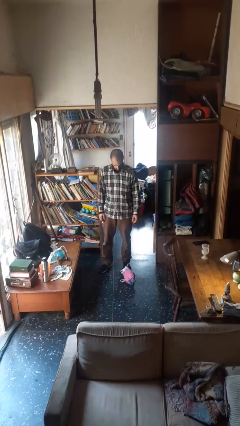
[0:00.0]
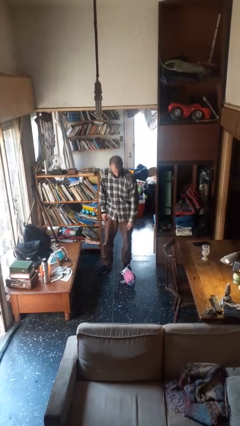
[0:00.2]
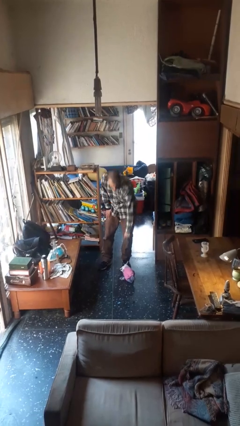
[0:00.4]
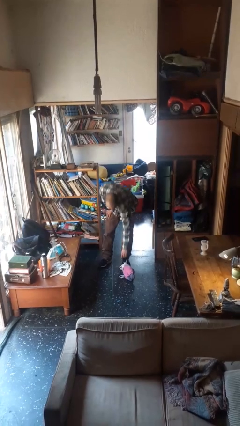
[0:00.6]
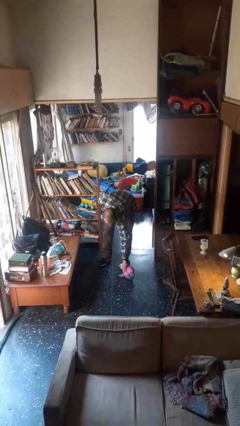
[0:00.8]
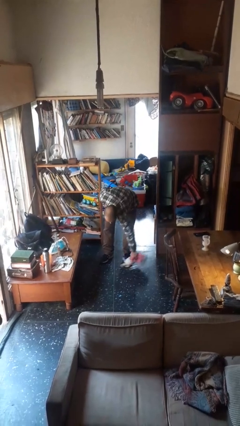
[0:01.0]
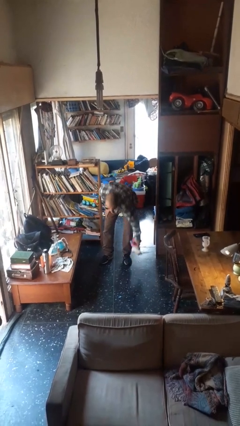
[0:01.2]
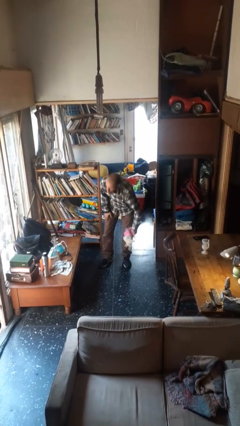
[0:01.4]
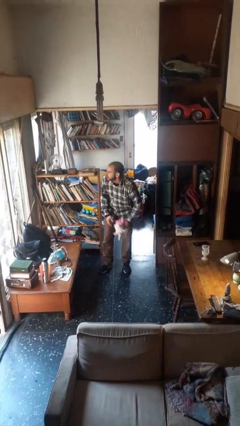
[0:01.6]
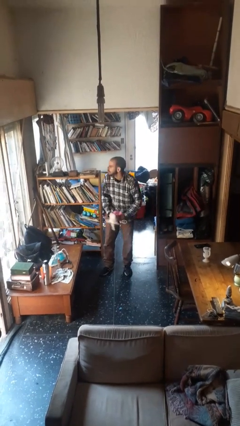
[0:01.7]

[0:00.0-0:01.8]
person picks up object from floor

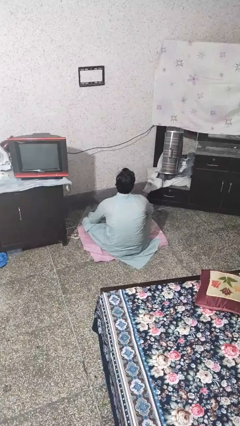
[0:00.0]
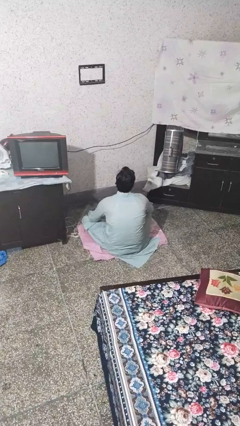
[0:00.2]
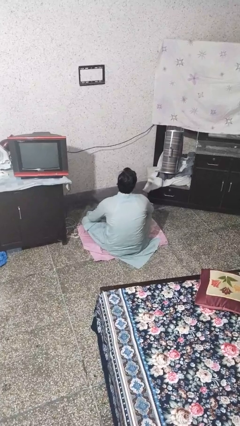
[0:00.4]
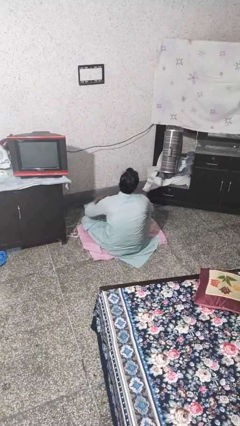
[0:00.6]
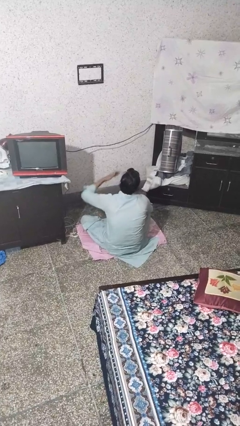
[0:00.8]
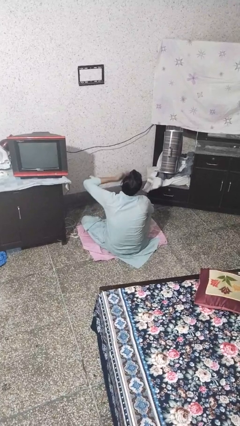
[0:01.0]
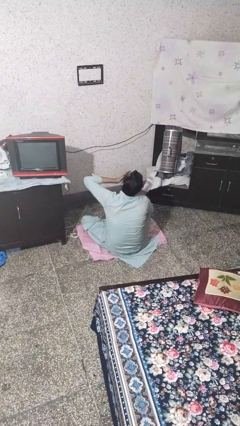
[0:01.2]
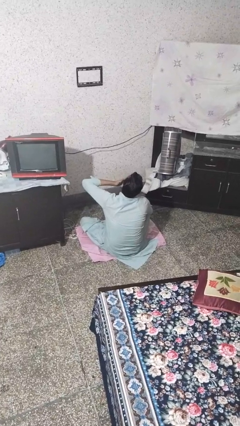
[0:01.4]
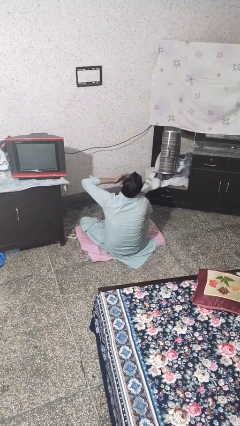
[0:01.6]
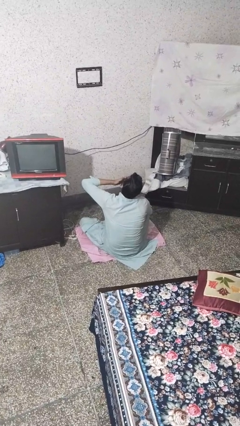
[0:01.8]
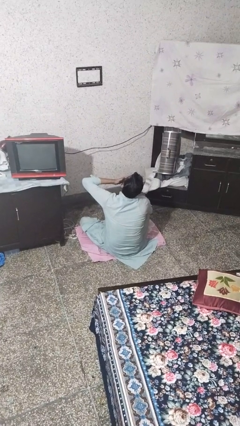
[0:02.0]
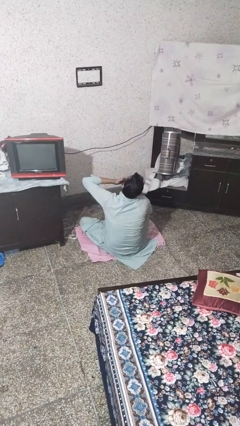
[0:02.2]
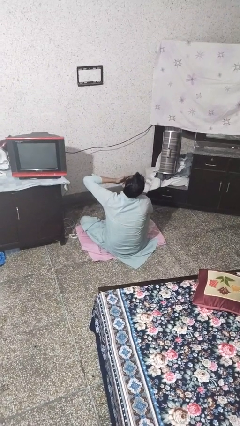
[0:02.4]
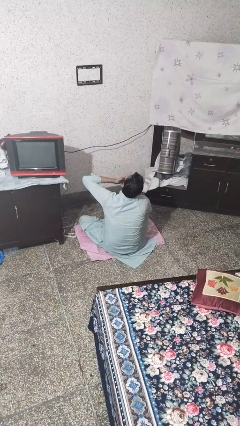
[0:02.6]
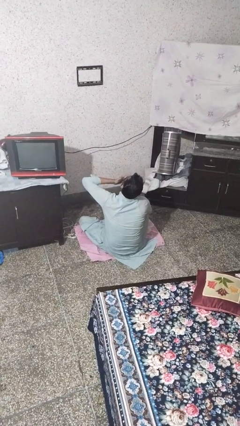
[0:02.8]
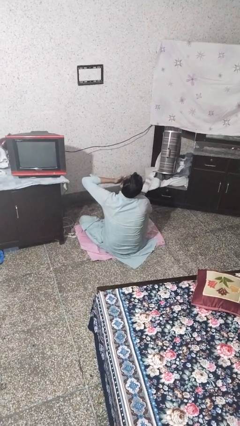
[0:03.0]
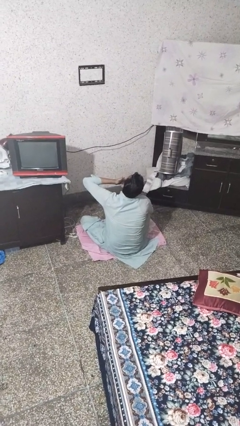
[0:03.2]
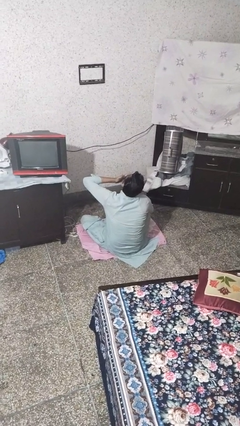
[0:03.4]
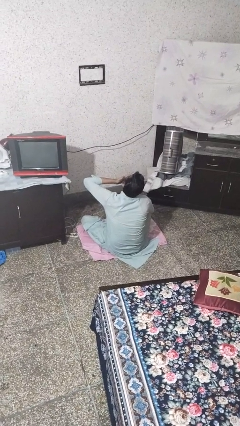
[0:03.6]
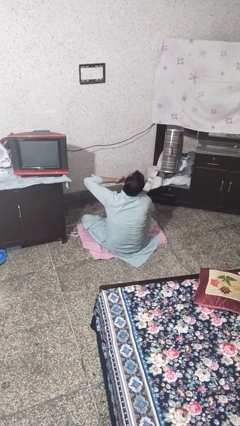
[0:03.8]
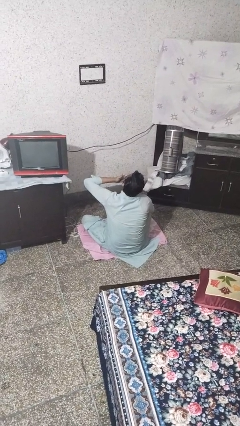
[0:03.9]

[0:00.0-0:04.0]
person yawns

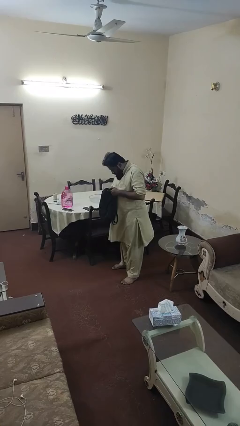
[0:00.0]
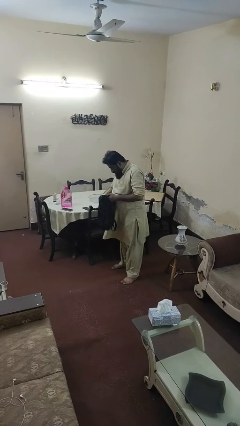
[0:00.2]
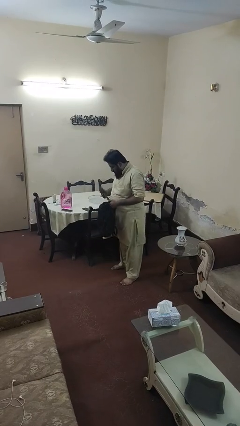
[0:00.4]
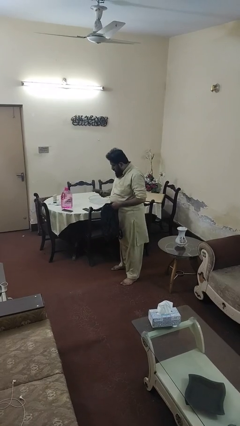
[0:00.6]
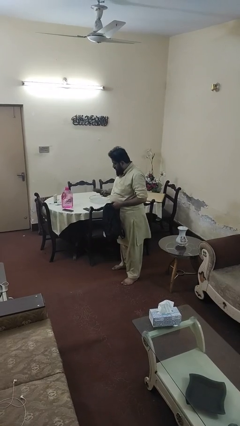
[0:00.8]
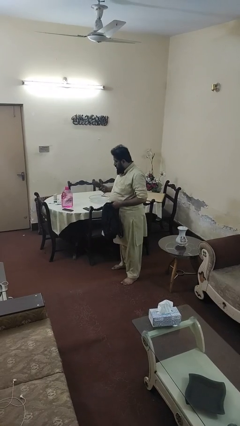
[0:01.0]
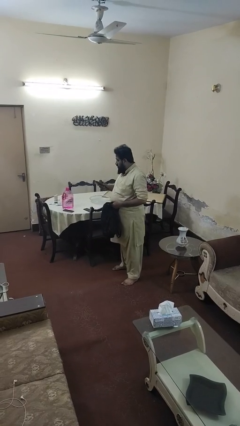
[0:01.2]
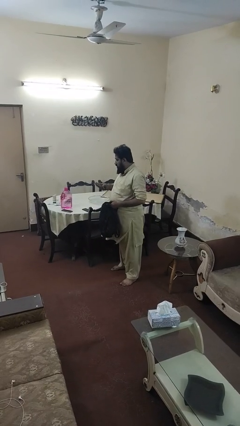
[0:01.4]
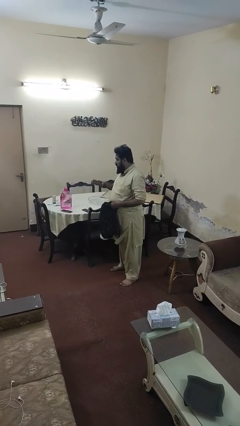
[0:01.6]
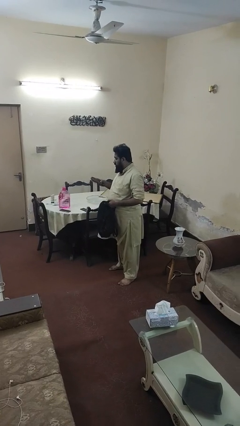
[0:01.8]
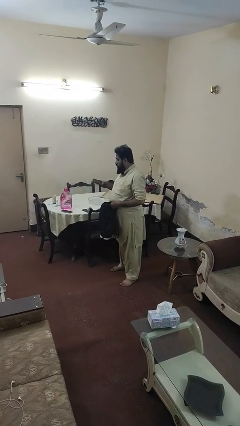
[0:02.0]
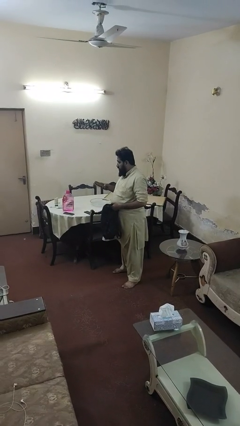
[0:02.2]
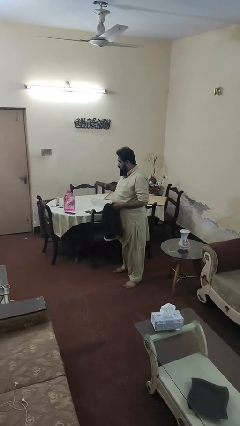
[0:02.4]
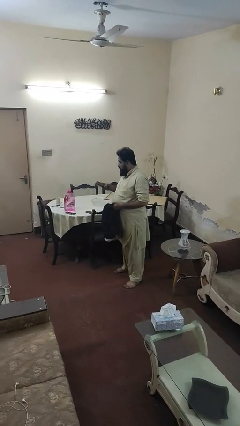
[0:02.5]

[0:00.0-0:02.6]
person takes object from backpack

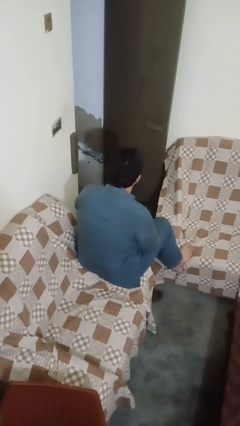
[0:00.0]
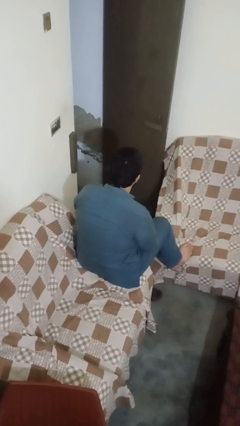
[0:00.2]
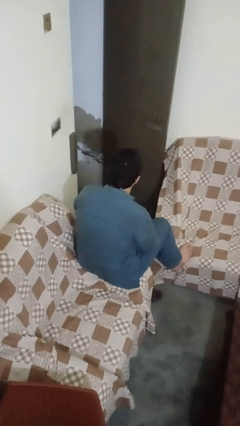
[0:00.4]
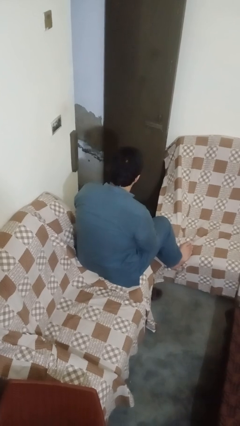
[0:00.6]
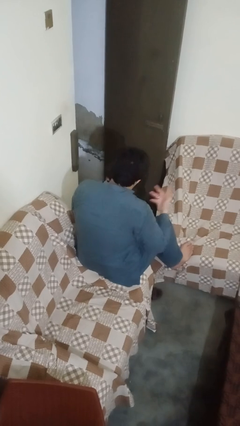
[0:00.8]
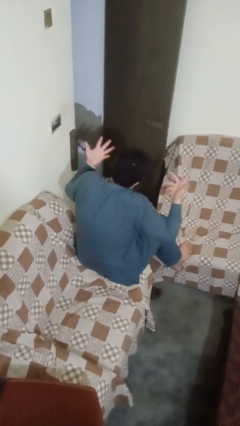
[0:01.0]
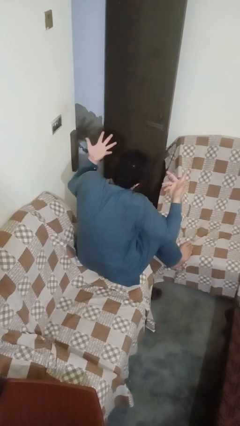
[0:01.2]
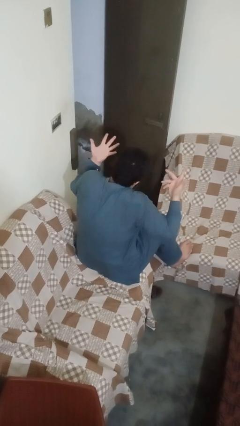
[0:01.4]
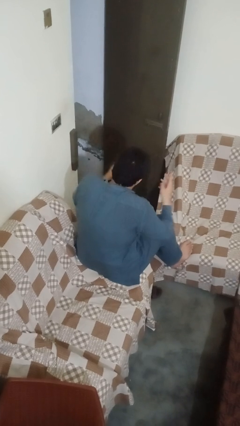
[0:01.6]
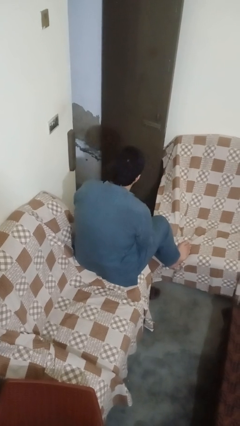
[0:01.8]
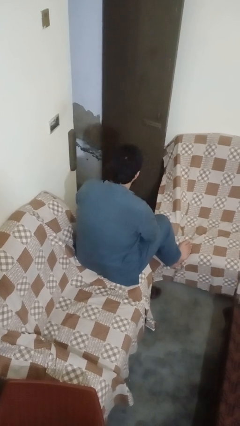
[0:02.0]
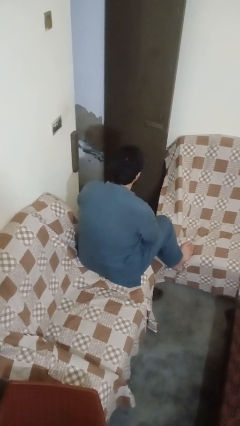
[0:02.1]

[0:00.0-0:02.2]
person shrugs

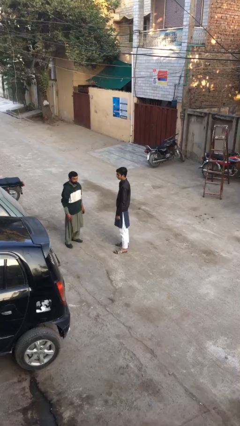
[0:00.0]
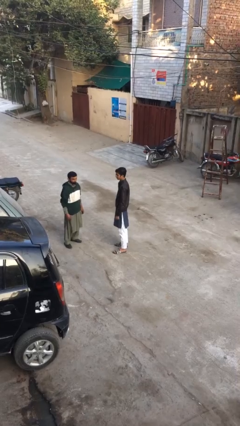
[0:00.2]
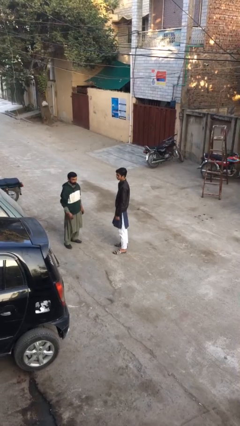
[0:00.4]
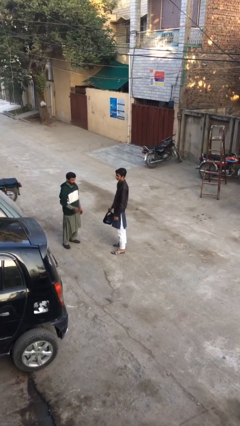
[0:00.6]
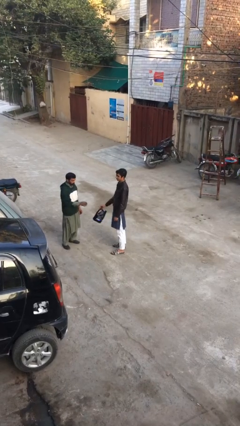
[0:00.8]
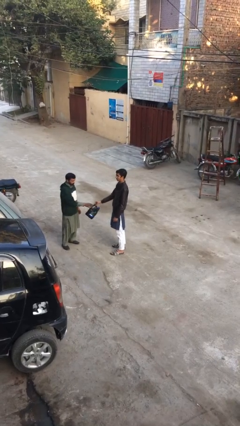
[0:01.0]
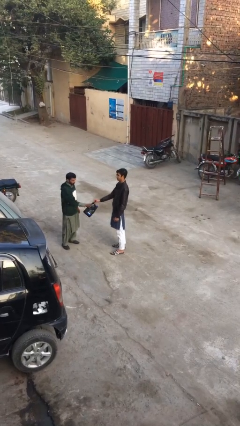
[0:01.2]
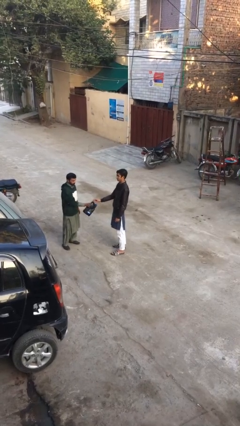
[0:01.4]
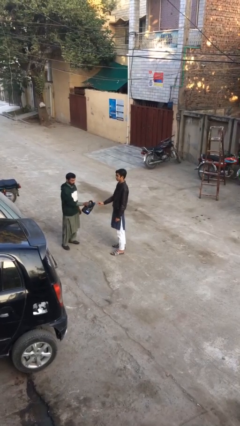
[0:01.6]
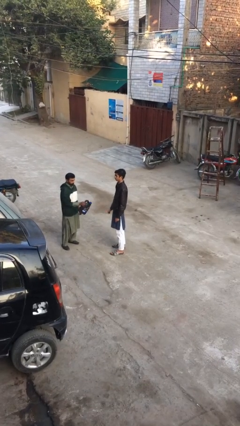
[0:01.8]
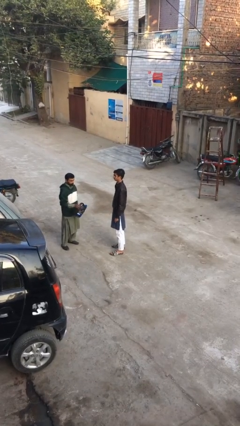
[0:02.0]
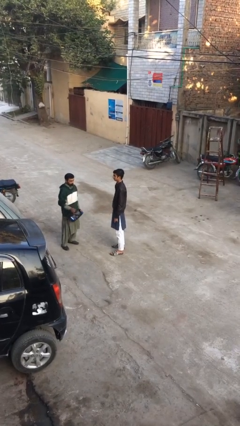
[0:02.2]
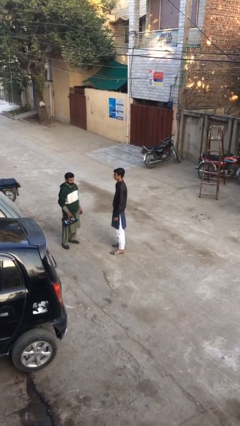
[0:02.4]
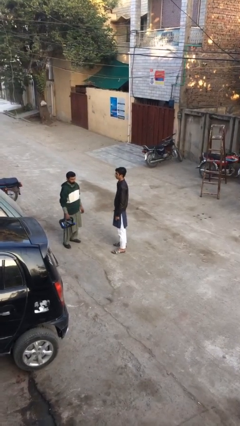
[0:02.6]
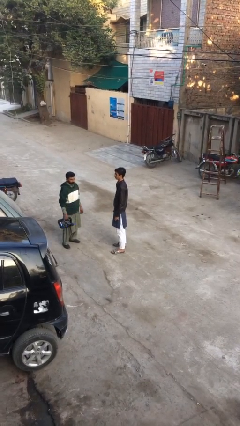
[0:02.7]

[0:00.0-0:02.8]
person transfers object to person

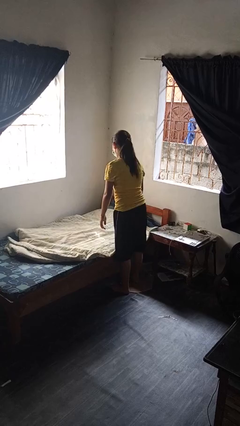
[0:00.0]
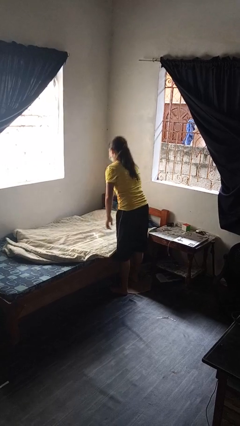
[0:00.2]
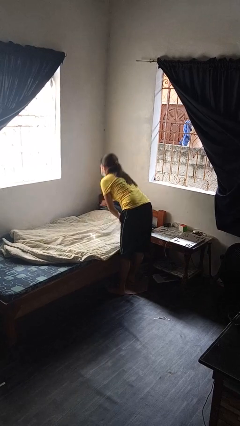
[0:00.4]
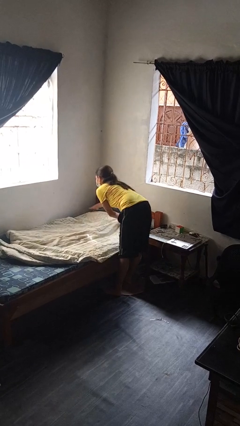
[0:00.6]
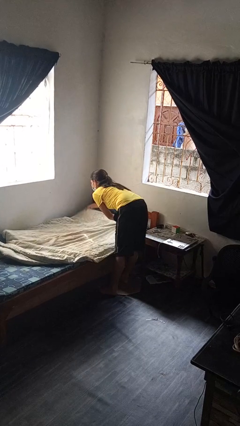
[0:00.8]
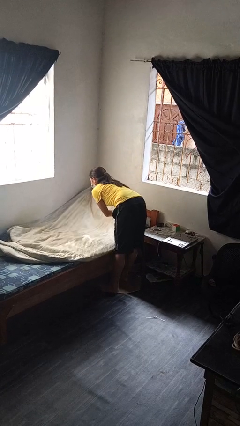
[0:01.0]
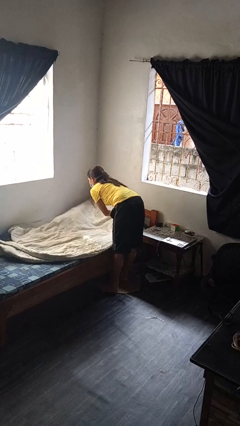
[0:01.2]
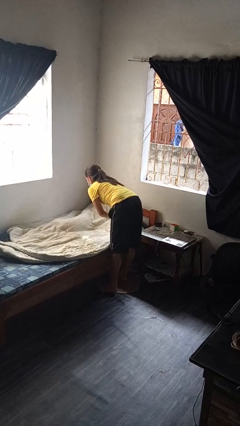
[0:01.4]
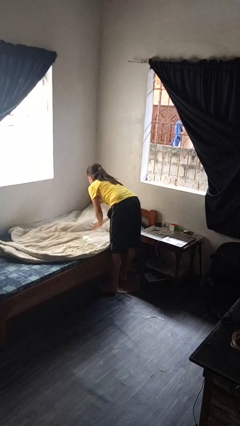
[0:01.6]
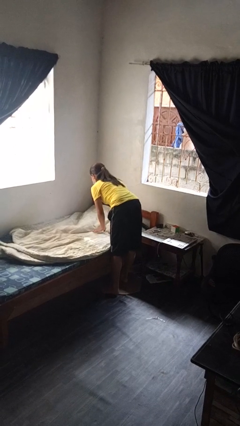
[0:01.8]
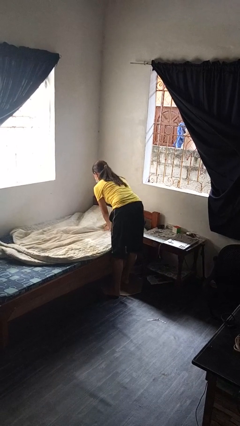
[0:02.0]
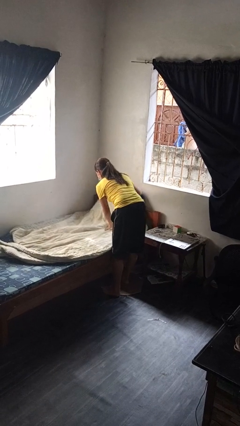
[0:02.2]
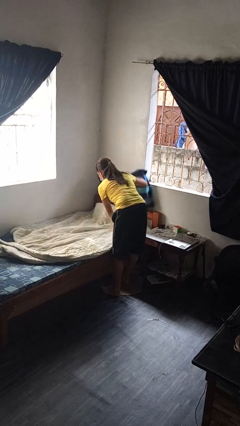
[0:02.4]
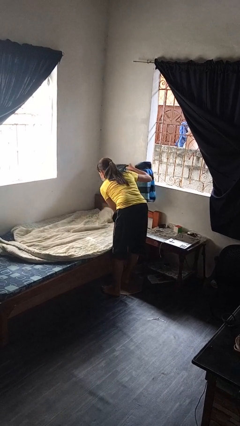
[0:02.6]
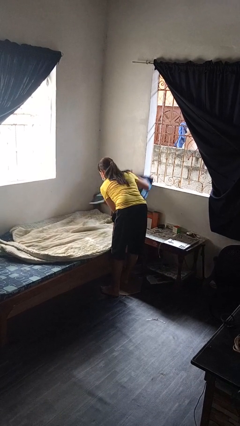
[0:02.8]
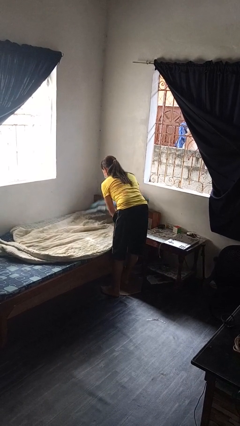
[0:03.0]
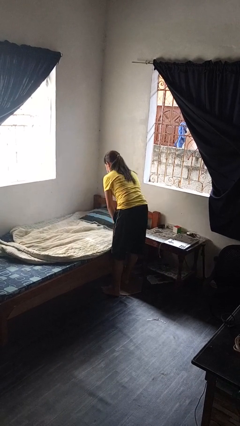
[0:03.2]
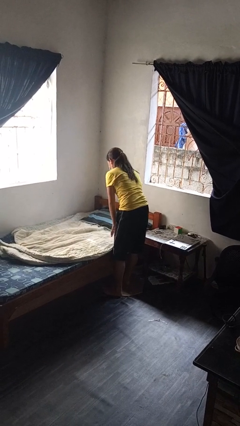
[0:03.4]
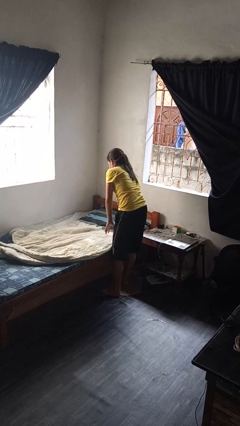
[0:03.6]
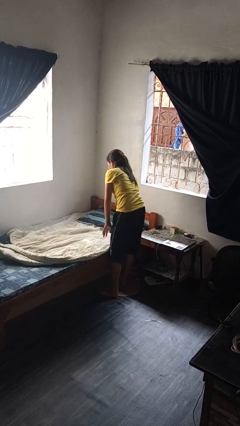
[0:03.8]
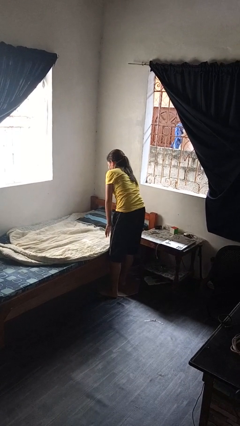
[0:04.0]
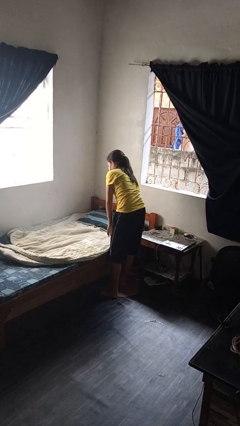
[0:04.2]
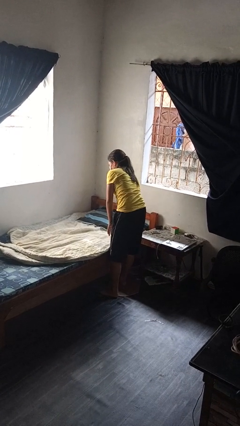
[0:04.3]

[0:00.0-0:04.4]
person makes bed
